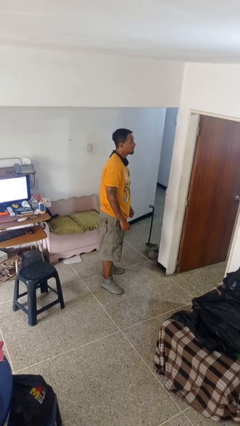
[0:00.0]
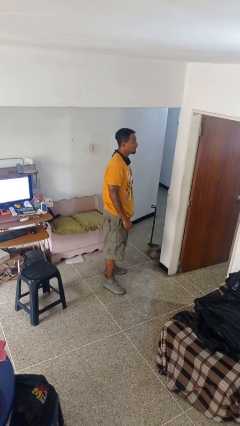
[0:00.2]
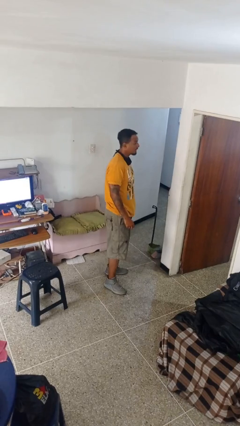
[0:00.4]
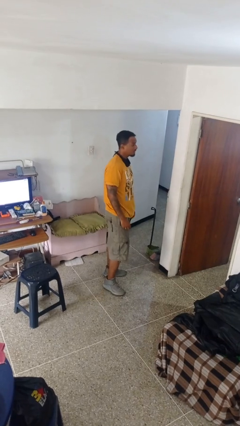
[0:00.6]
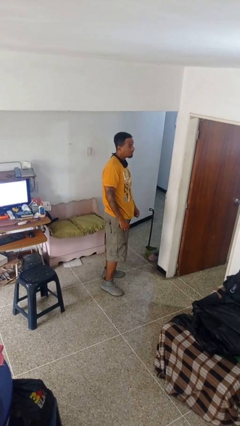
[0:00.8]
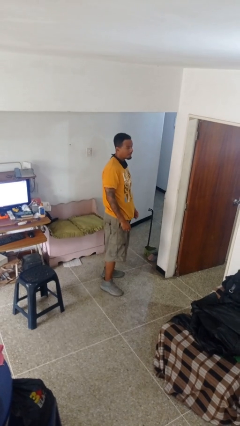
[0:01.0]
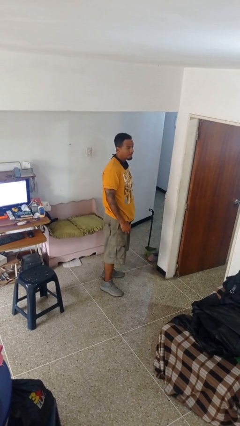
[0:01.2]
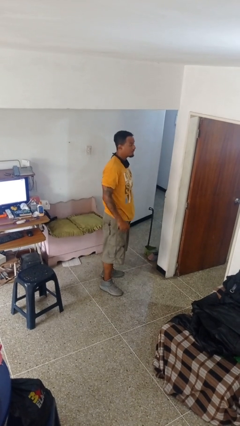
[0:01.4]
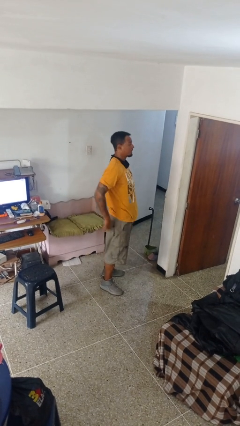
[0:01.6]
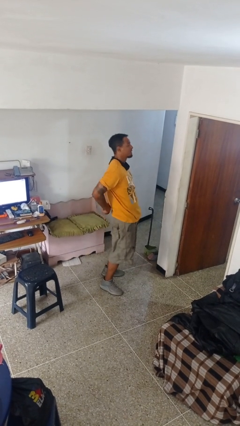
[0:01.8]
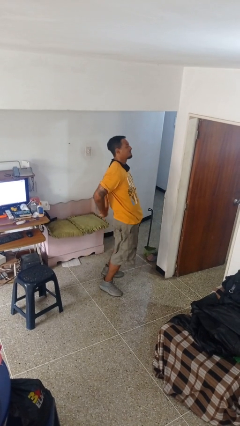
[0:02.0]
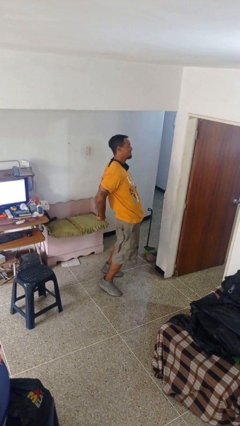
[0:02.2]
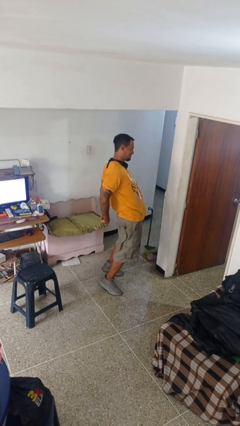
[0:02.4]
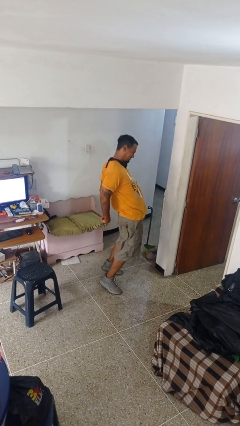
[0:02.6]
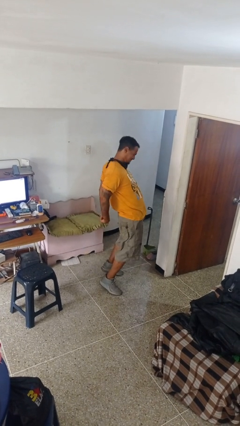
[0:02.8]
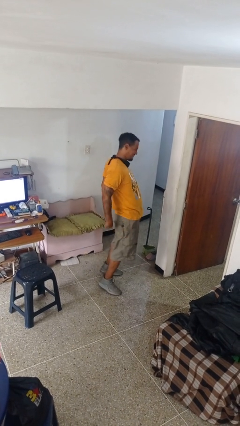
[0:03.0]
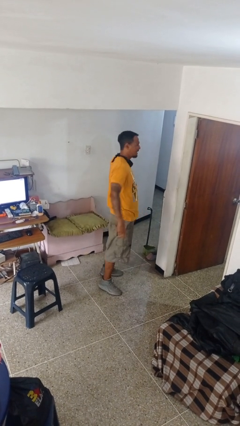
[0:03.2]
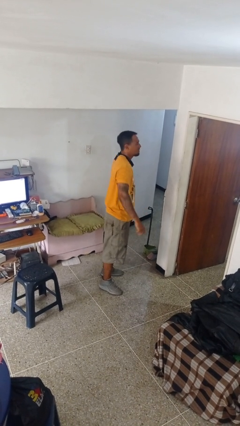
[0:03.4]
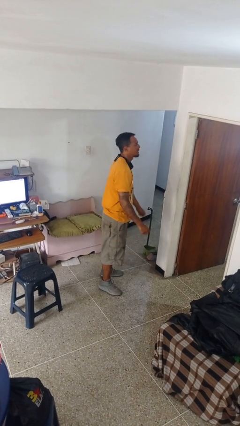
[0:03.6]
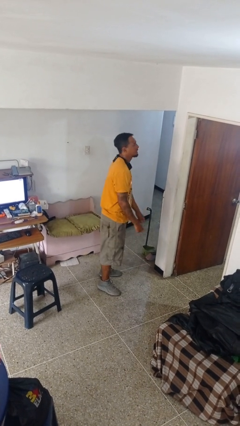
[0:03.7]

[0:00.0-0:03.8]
person stretches back

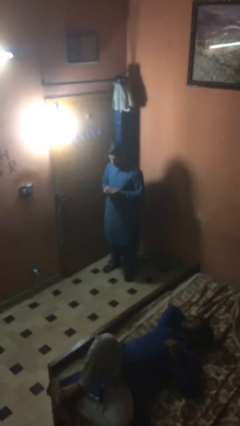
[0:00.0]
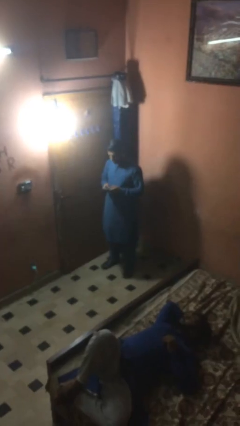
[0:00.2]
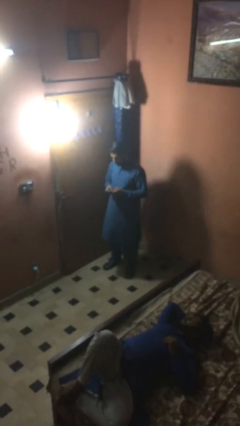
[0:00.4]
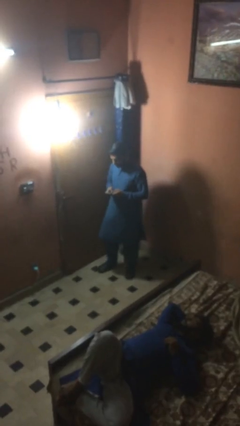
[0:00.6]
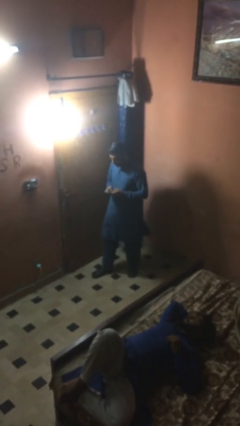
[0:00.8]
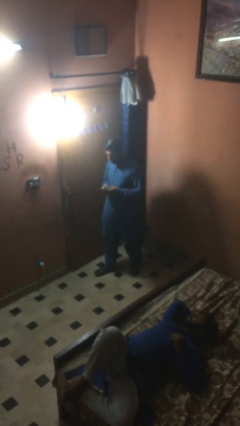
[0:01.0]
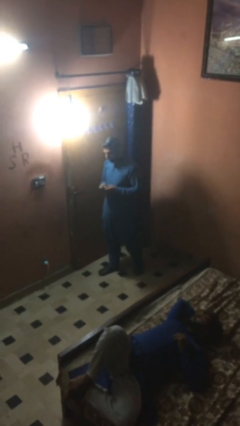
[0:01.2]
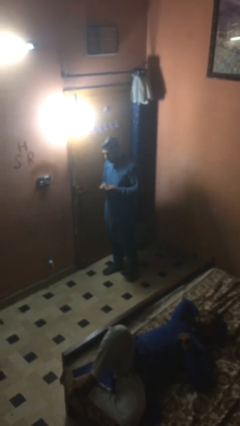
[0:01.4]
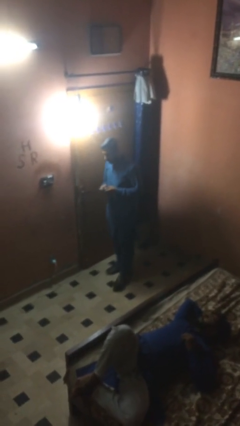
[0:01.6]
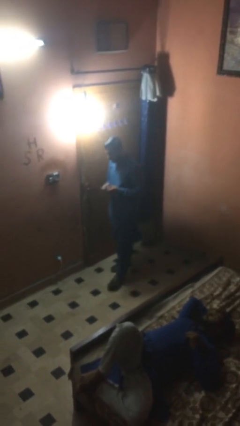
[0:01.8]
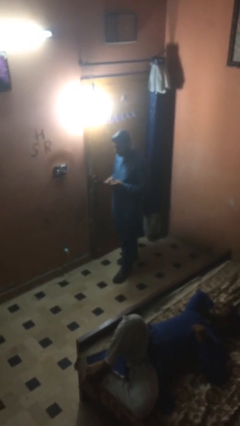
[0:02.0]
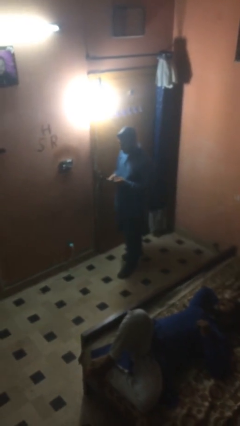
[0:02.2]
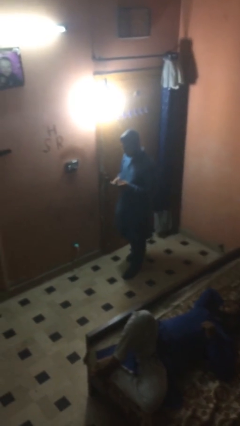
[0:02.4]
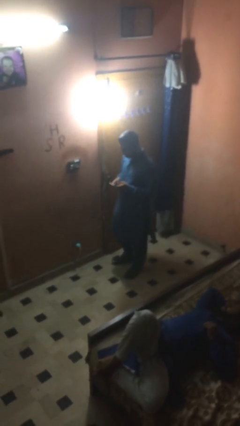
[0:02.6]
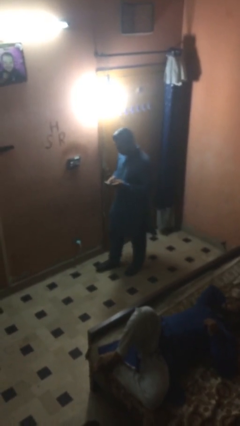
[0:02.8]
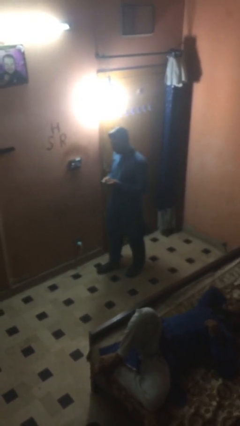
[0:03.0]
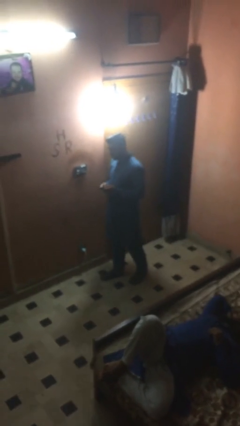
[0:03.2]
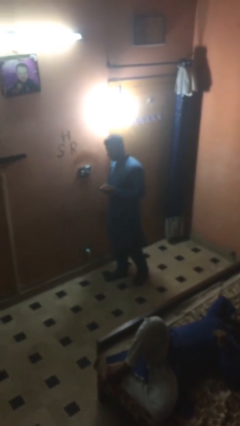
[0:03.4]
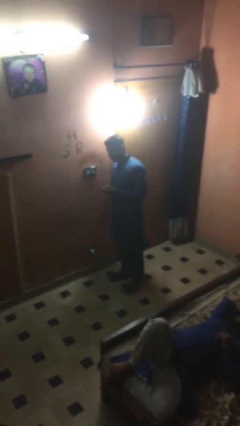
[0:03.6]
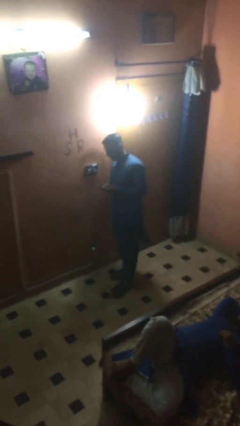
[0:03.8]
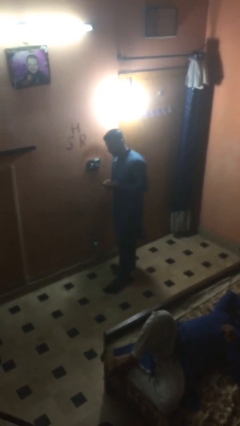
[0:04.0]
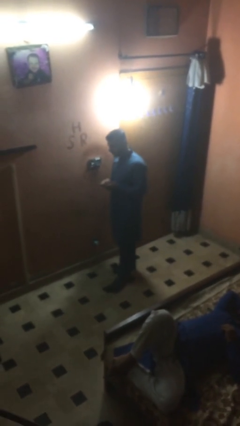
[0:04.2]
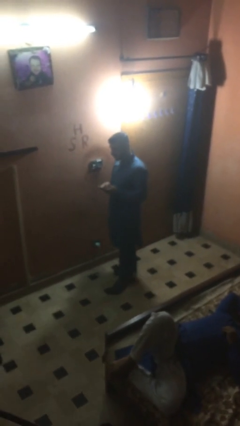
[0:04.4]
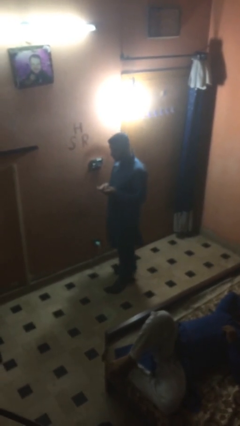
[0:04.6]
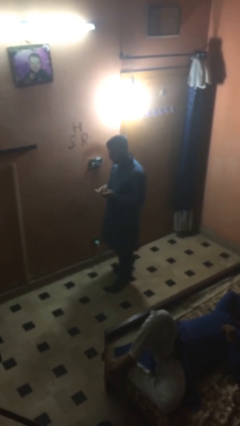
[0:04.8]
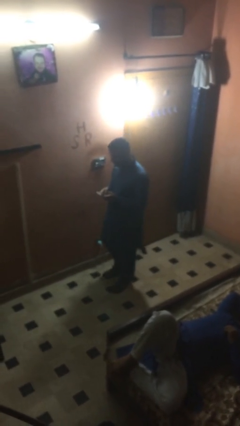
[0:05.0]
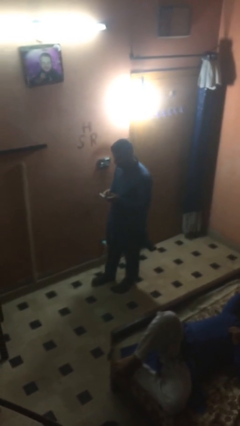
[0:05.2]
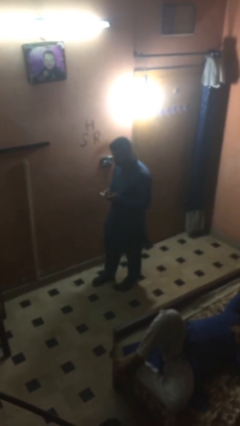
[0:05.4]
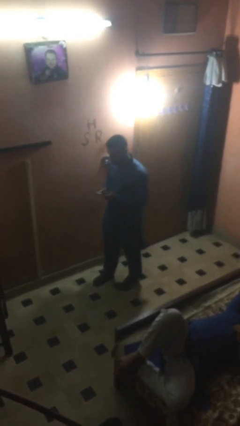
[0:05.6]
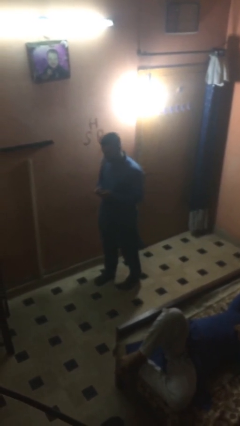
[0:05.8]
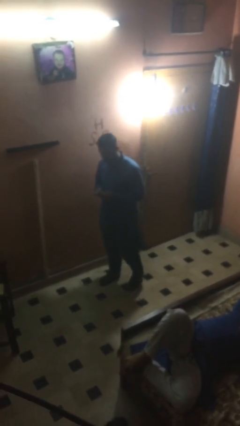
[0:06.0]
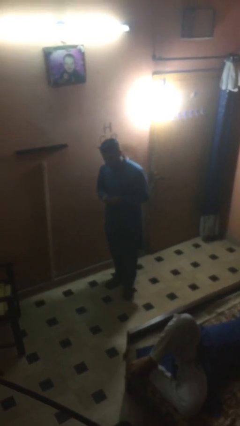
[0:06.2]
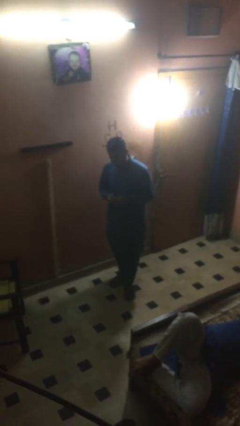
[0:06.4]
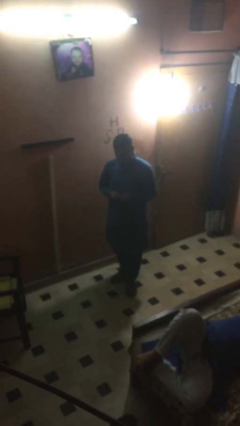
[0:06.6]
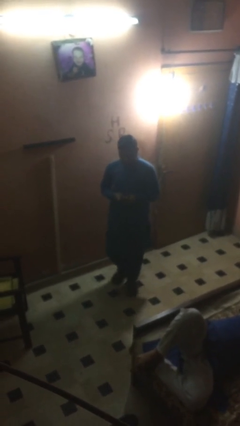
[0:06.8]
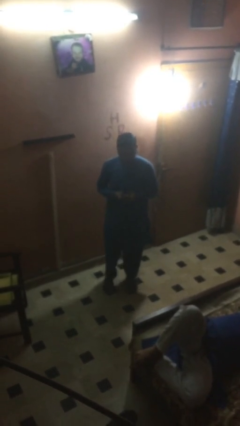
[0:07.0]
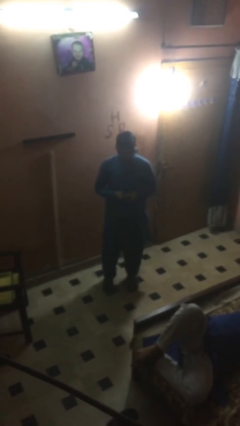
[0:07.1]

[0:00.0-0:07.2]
person texts on phone

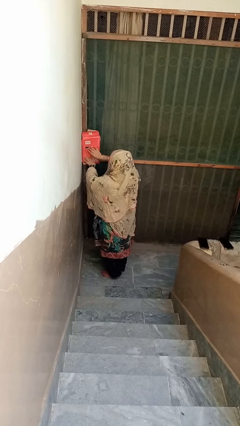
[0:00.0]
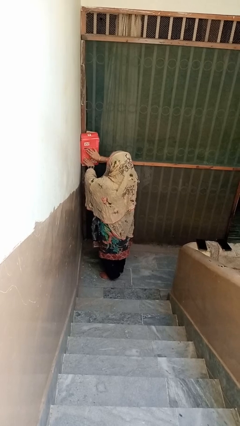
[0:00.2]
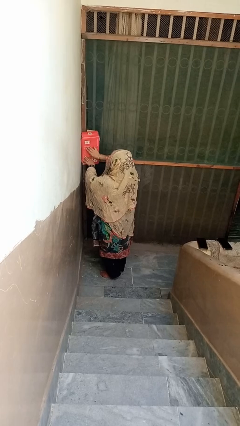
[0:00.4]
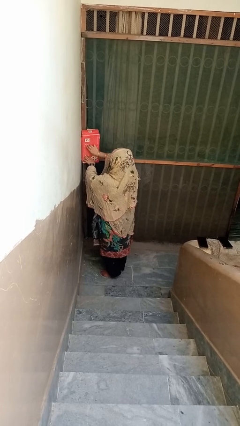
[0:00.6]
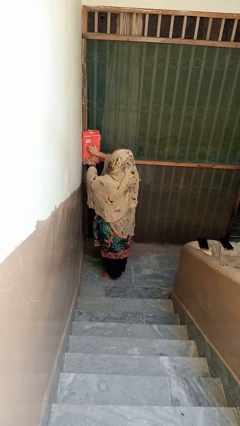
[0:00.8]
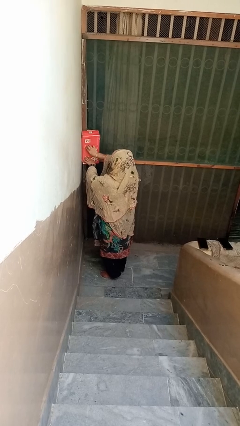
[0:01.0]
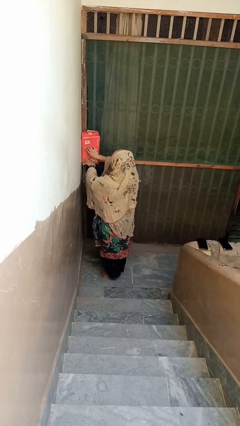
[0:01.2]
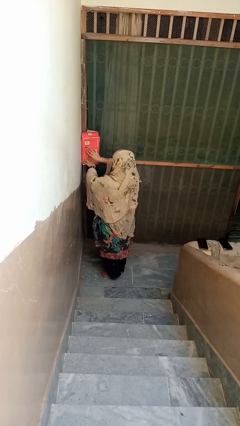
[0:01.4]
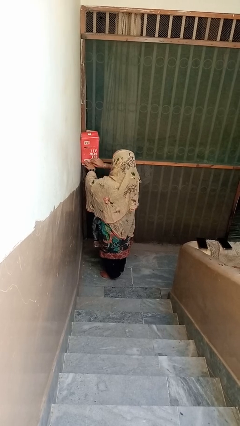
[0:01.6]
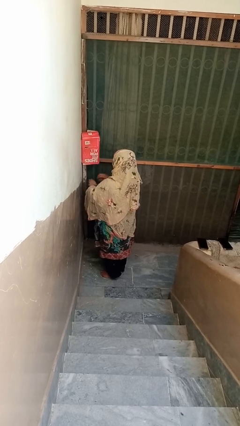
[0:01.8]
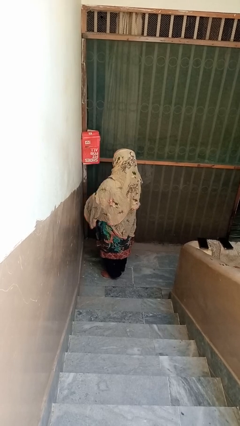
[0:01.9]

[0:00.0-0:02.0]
person closes mailbox

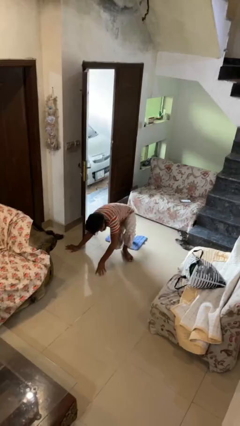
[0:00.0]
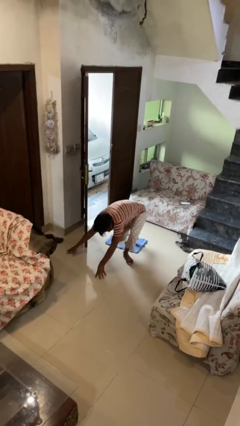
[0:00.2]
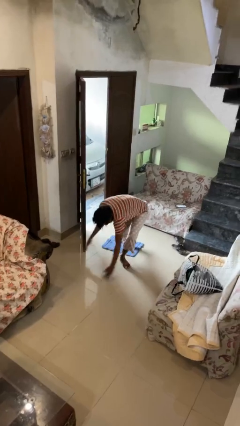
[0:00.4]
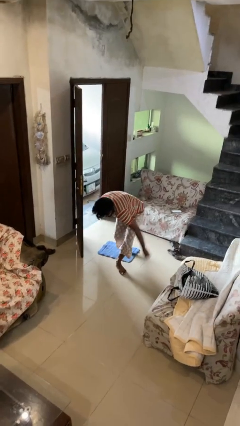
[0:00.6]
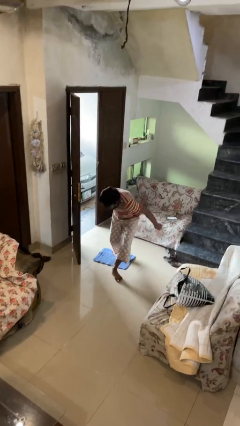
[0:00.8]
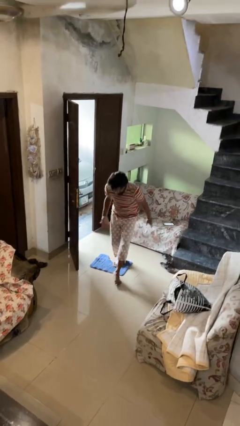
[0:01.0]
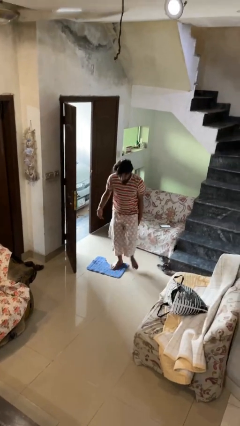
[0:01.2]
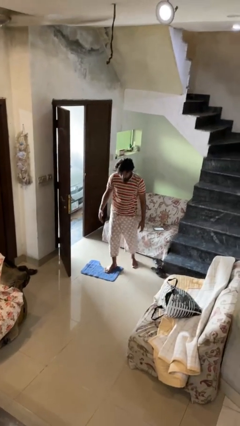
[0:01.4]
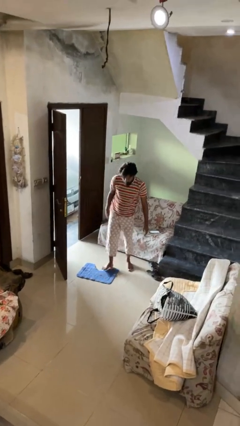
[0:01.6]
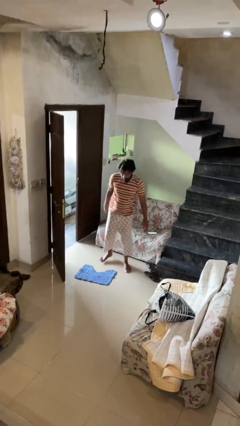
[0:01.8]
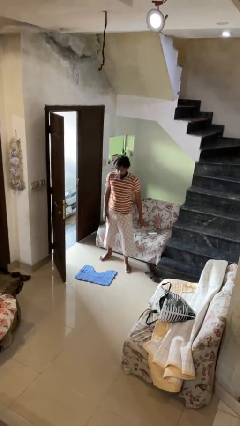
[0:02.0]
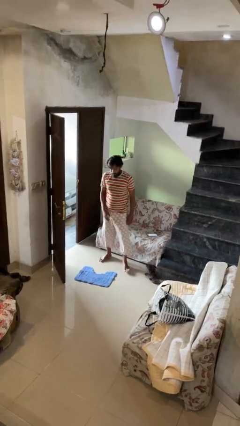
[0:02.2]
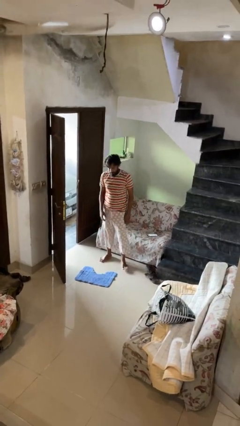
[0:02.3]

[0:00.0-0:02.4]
person stands up from floor

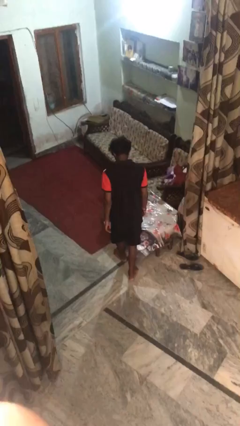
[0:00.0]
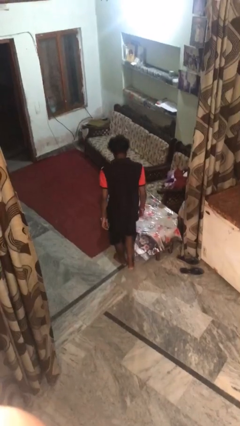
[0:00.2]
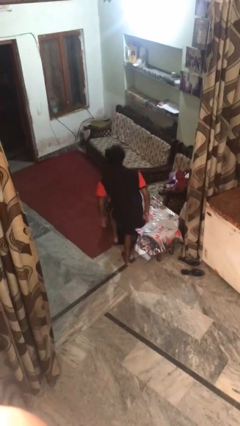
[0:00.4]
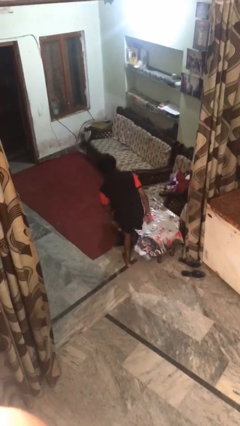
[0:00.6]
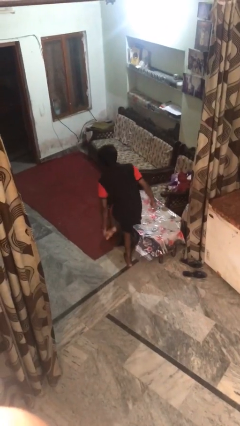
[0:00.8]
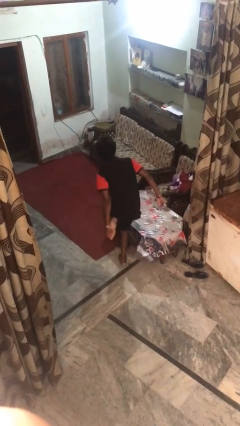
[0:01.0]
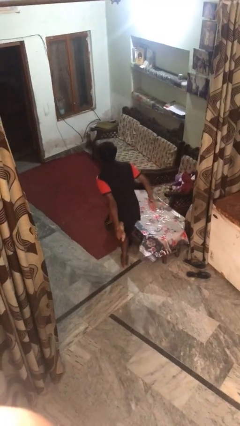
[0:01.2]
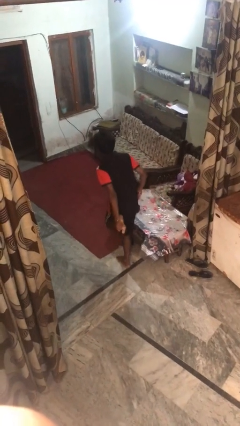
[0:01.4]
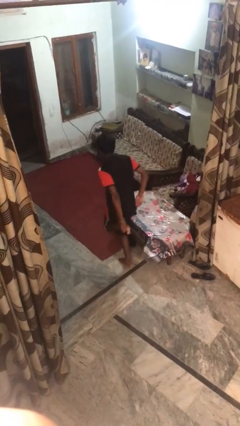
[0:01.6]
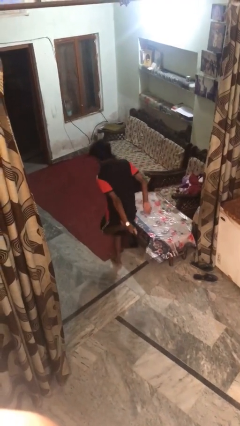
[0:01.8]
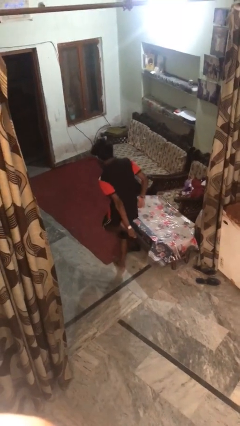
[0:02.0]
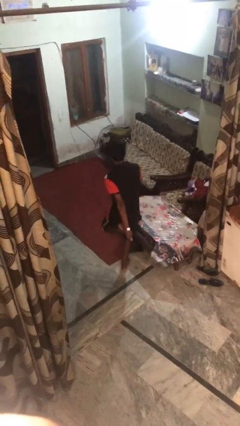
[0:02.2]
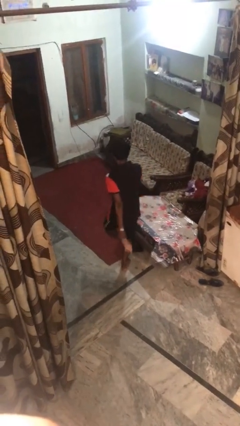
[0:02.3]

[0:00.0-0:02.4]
person stubs toe

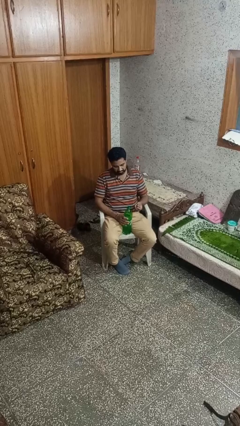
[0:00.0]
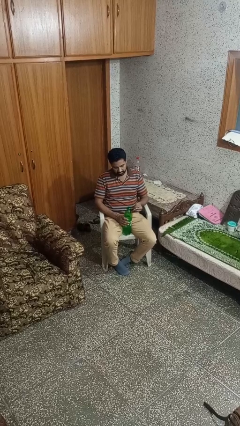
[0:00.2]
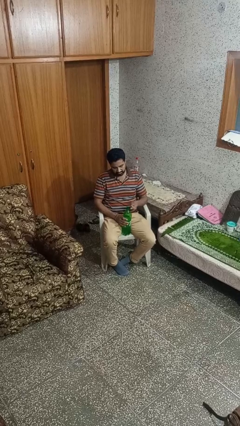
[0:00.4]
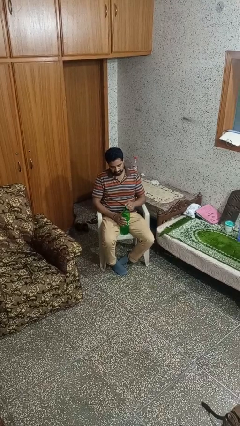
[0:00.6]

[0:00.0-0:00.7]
person screws lid to bottle
